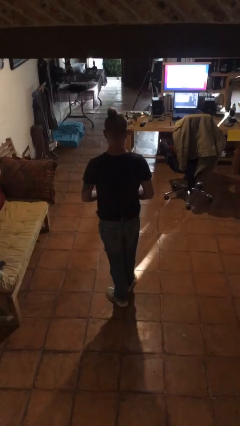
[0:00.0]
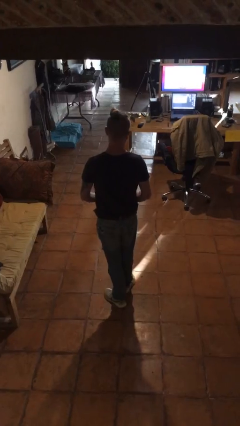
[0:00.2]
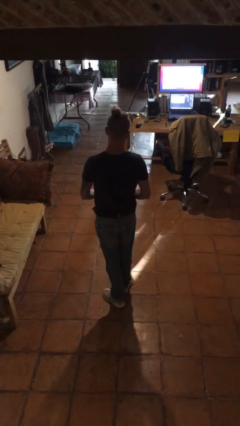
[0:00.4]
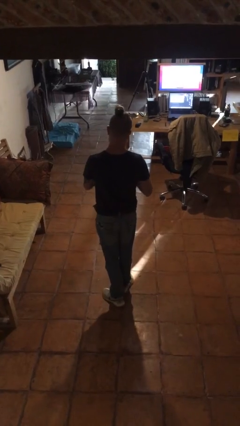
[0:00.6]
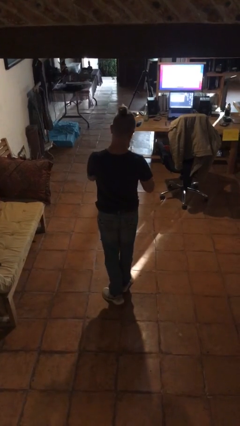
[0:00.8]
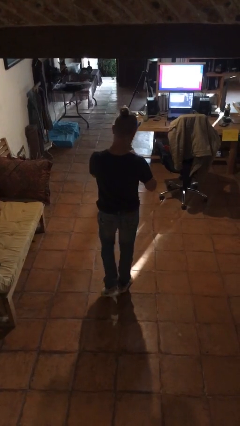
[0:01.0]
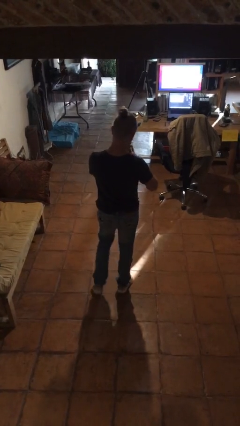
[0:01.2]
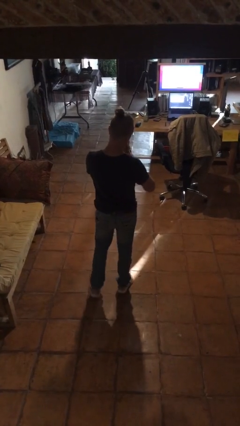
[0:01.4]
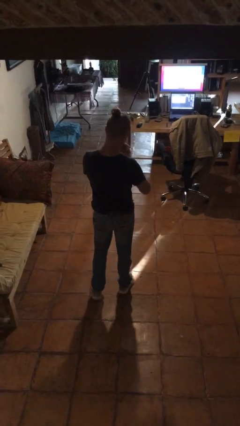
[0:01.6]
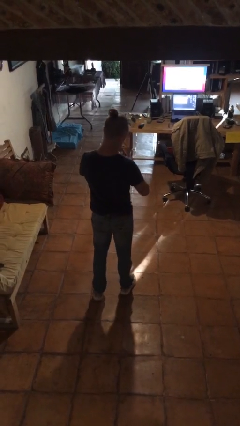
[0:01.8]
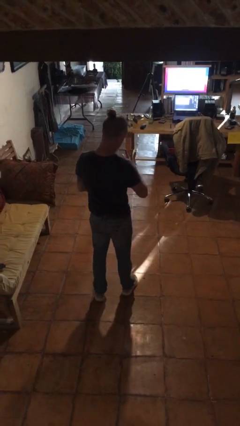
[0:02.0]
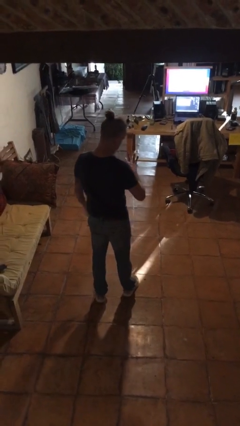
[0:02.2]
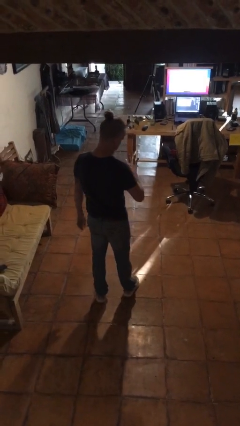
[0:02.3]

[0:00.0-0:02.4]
person puts on ring

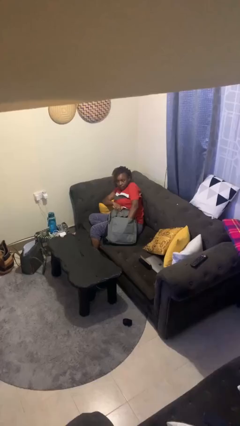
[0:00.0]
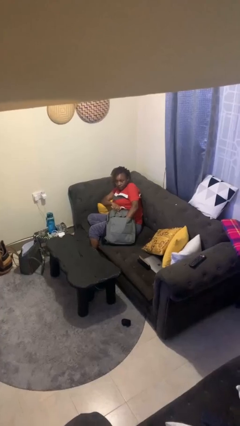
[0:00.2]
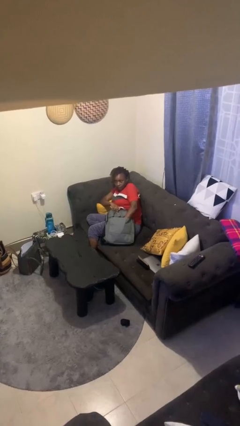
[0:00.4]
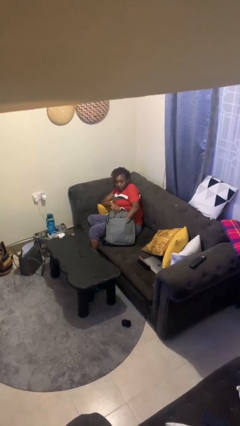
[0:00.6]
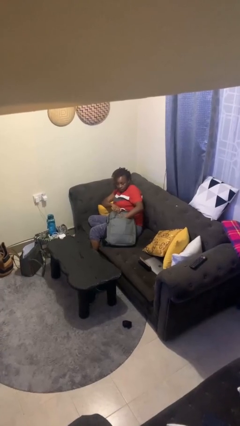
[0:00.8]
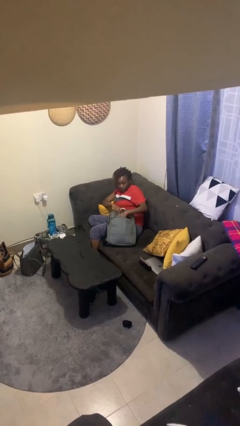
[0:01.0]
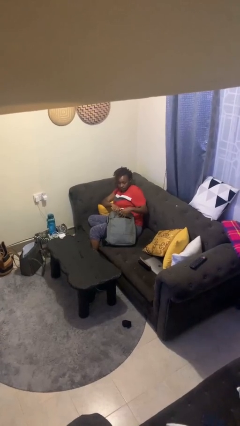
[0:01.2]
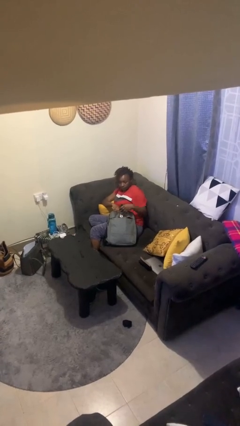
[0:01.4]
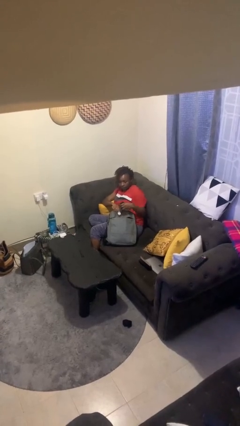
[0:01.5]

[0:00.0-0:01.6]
person takes object from backpack

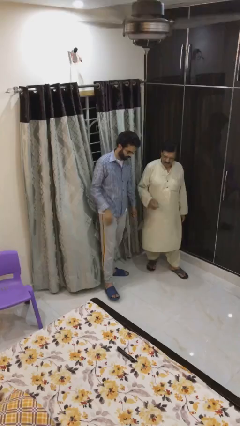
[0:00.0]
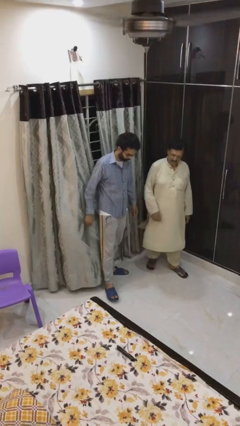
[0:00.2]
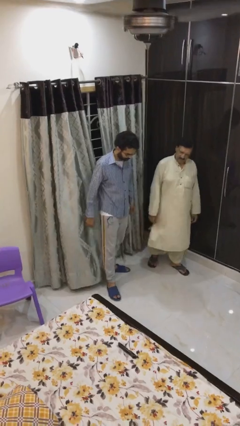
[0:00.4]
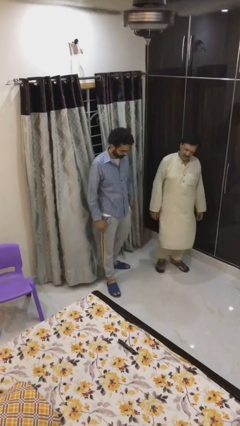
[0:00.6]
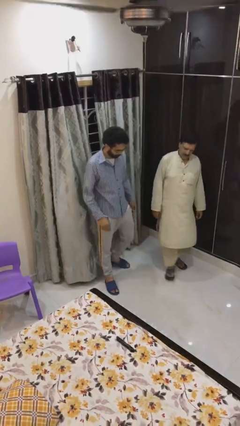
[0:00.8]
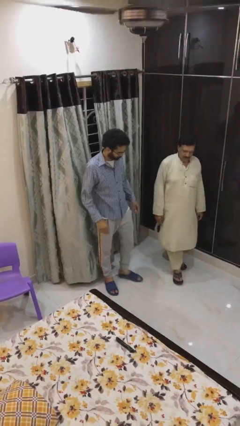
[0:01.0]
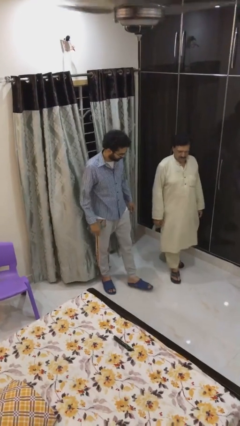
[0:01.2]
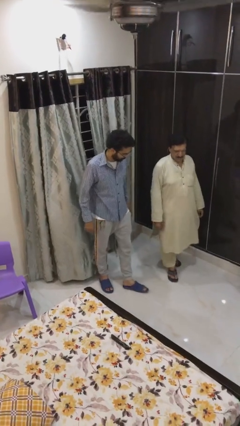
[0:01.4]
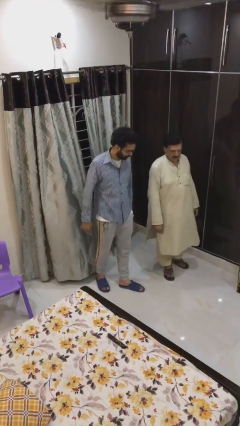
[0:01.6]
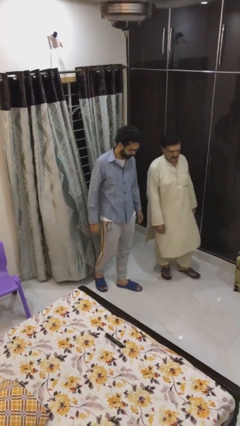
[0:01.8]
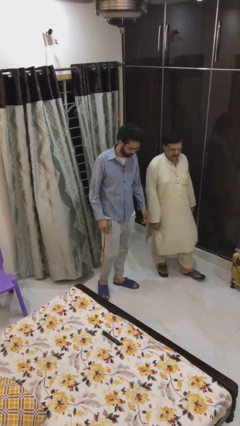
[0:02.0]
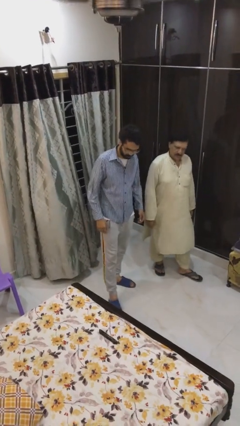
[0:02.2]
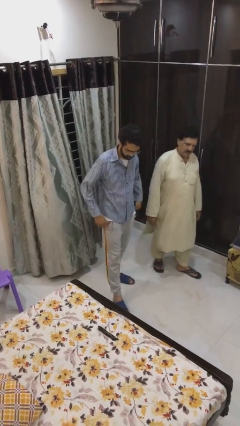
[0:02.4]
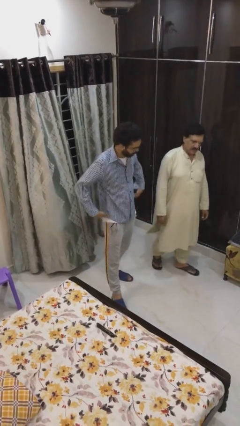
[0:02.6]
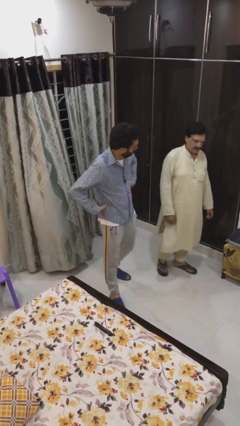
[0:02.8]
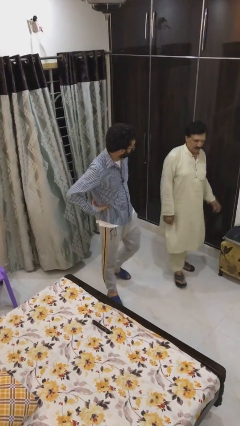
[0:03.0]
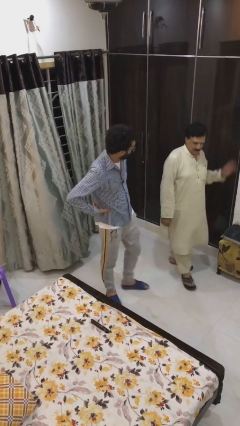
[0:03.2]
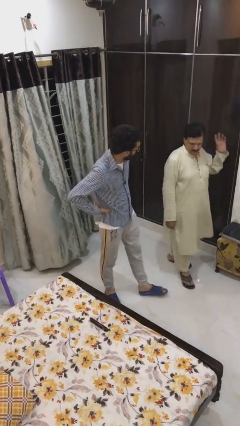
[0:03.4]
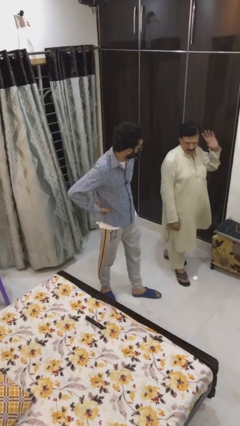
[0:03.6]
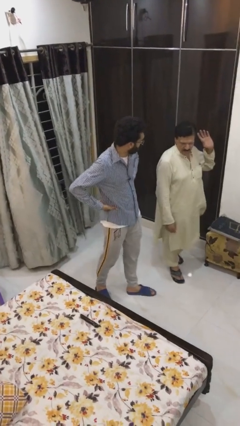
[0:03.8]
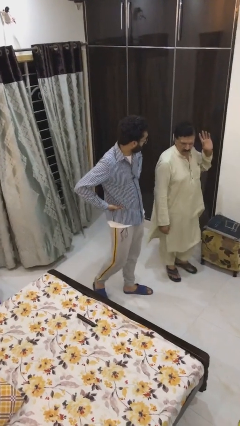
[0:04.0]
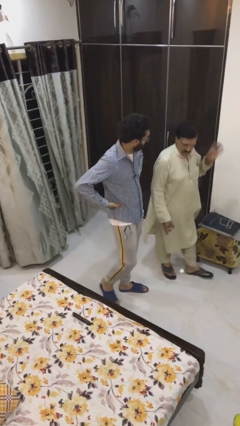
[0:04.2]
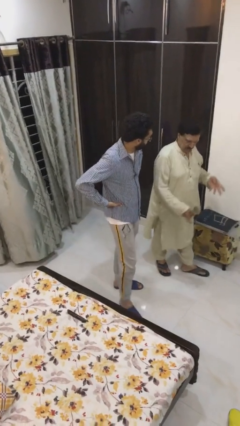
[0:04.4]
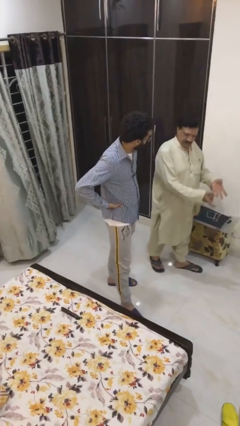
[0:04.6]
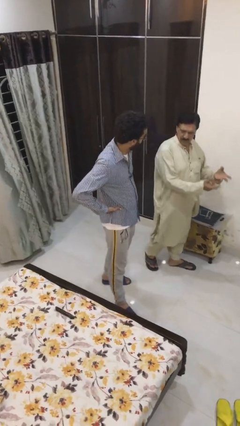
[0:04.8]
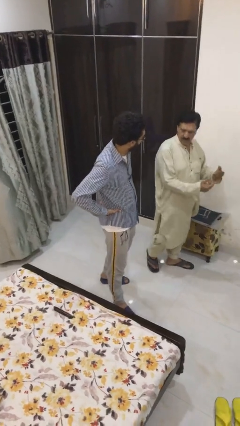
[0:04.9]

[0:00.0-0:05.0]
person talks to person

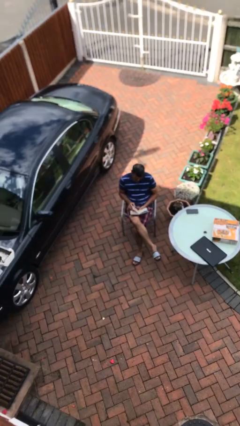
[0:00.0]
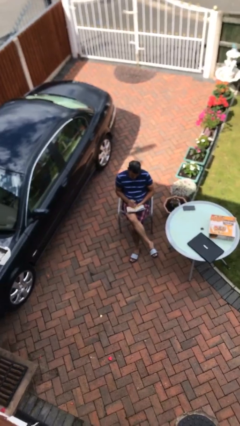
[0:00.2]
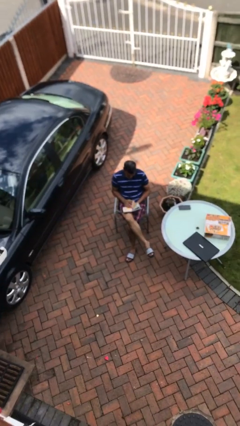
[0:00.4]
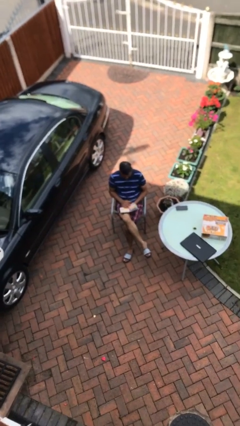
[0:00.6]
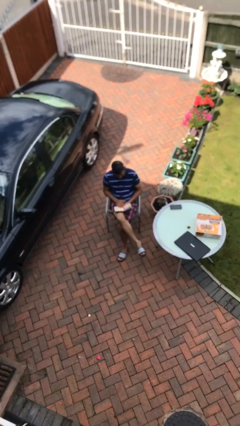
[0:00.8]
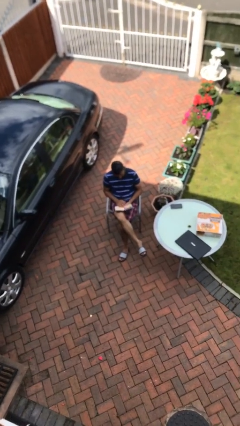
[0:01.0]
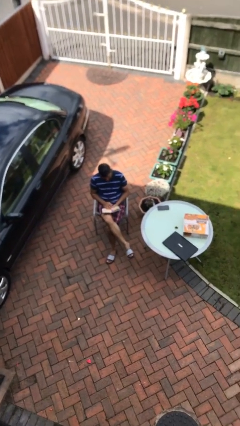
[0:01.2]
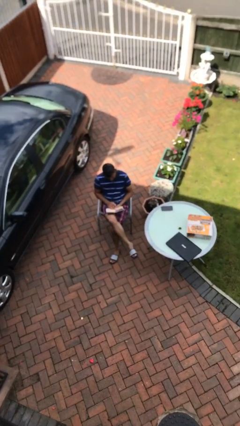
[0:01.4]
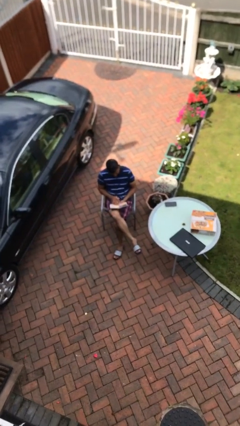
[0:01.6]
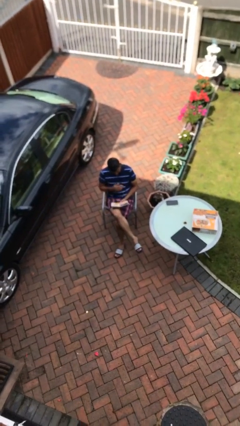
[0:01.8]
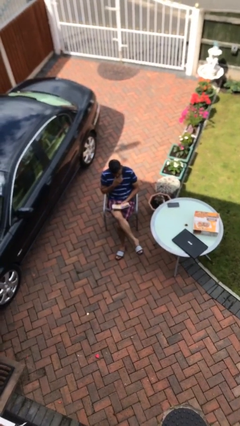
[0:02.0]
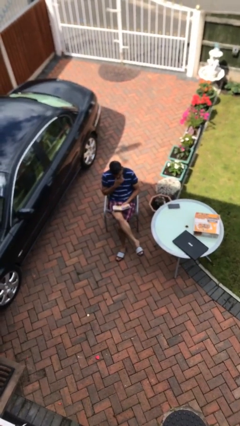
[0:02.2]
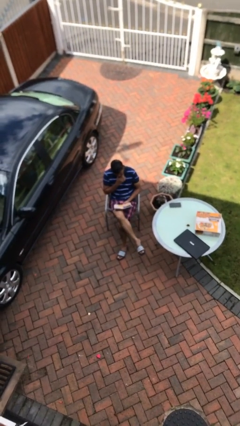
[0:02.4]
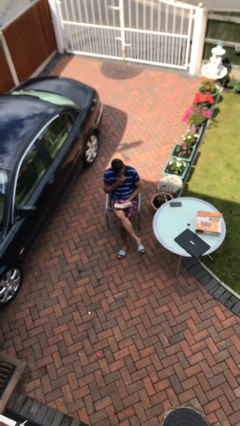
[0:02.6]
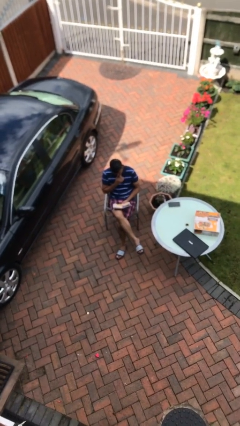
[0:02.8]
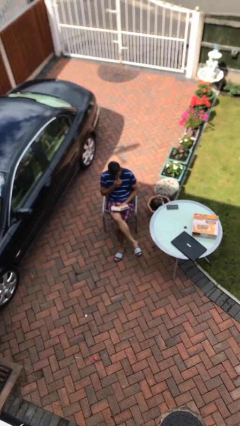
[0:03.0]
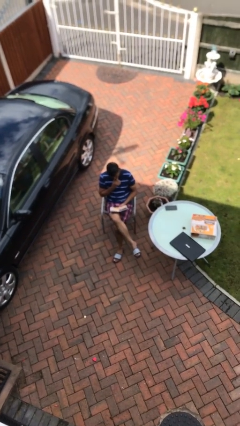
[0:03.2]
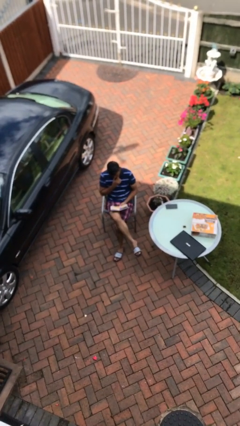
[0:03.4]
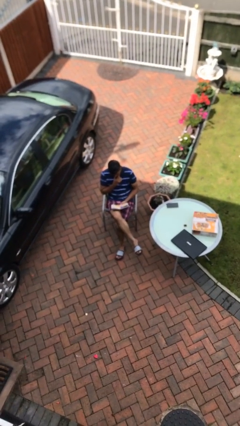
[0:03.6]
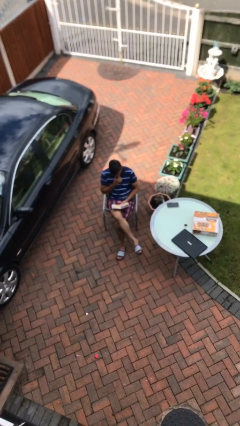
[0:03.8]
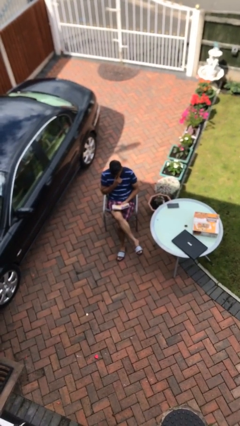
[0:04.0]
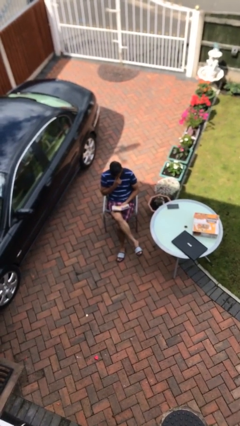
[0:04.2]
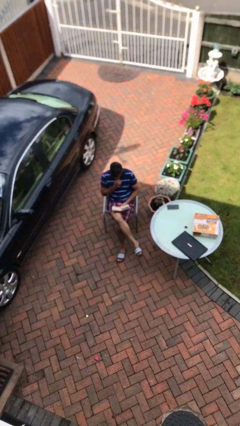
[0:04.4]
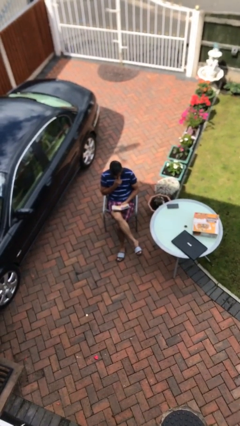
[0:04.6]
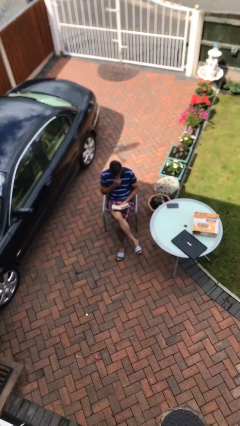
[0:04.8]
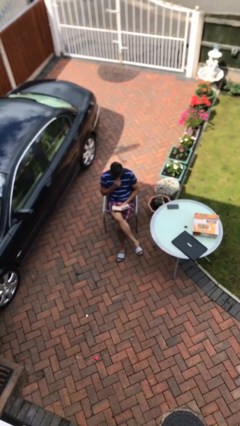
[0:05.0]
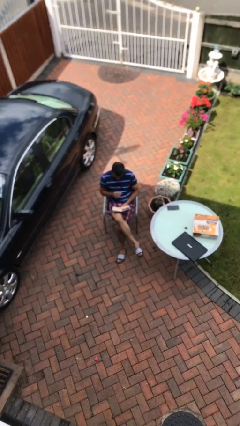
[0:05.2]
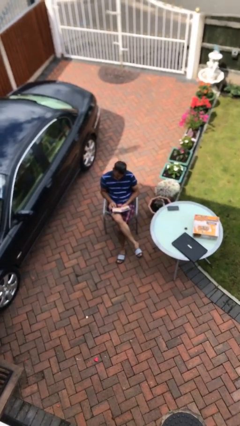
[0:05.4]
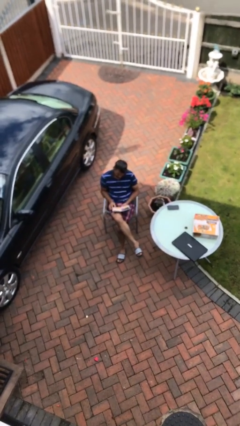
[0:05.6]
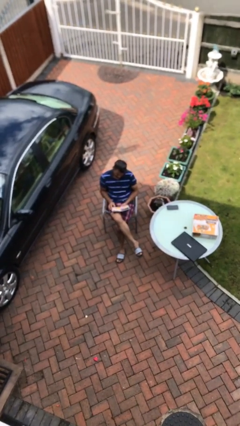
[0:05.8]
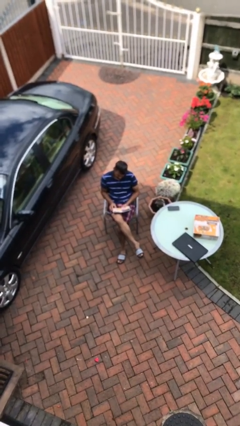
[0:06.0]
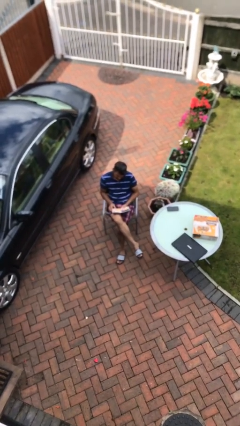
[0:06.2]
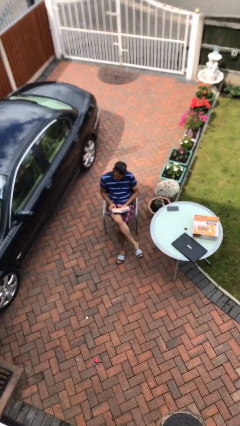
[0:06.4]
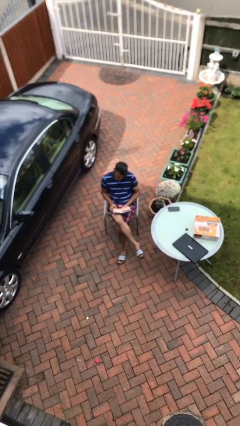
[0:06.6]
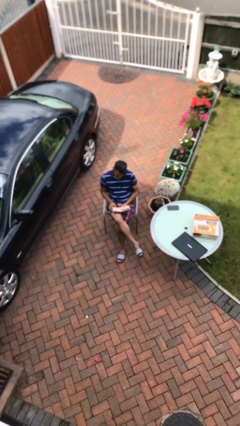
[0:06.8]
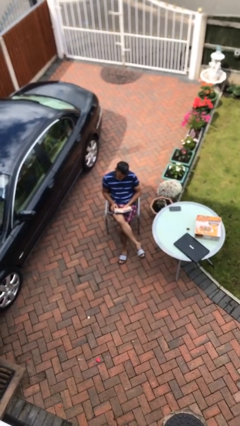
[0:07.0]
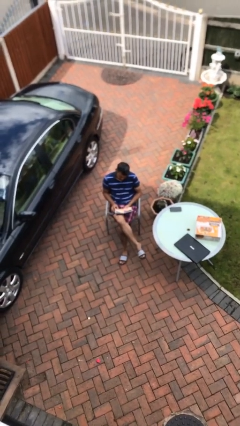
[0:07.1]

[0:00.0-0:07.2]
person reads document

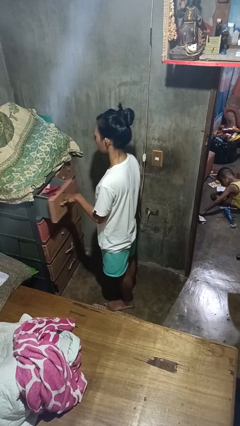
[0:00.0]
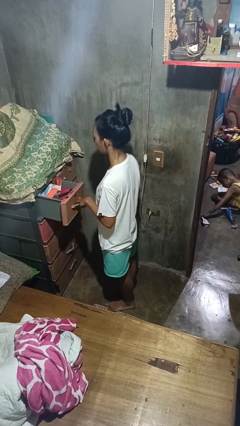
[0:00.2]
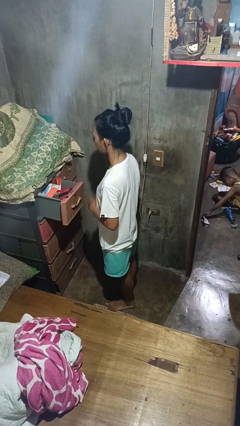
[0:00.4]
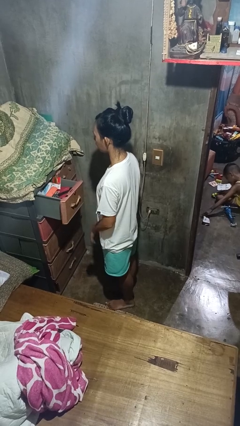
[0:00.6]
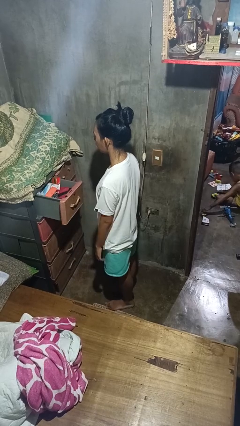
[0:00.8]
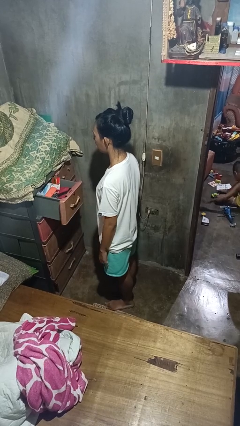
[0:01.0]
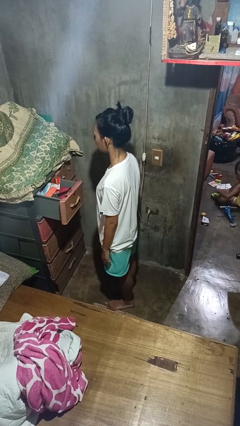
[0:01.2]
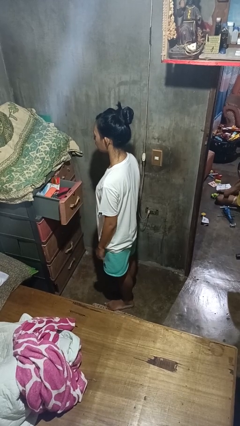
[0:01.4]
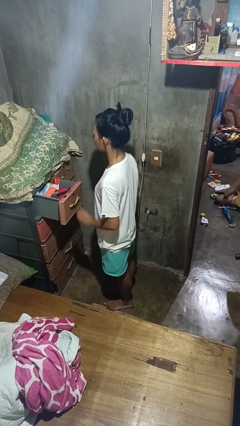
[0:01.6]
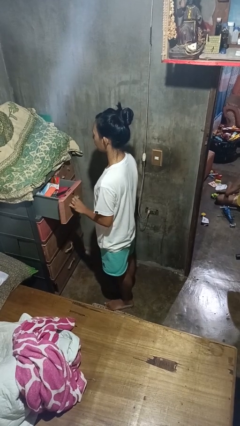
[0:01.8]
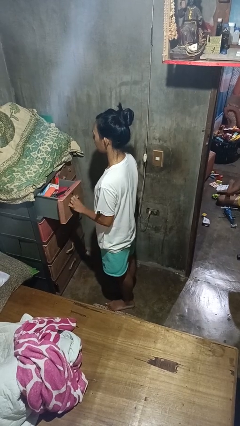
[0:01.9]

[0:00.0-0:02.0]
person opens dresser drawer
